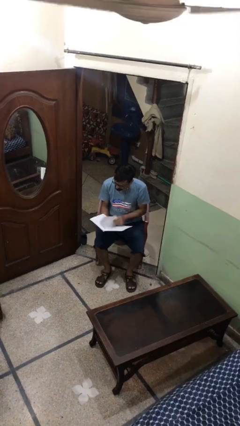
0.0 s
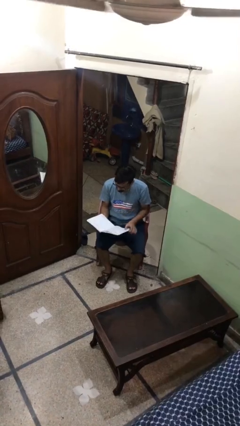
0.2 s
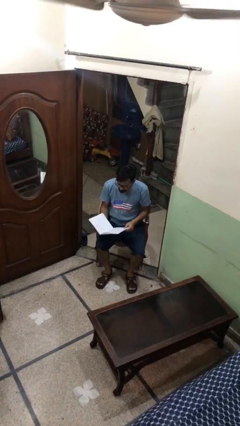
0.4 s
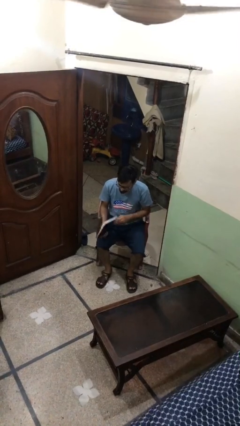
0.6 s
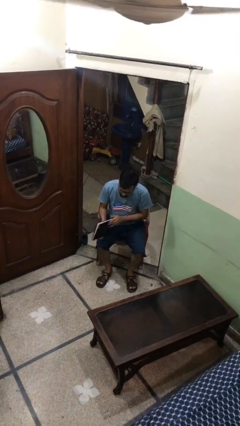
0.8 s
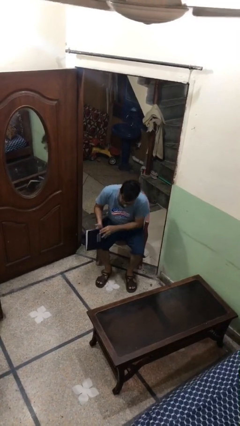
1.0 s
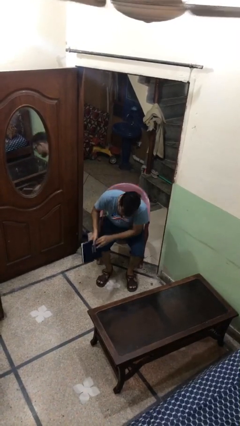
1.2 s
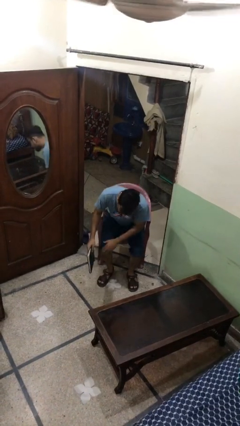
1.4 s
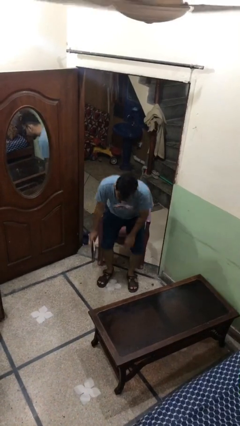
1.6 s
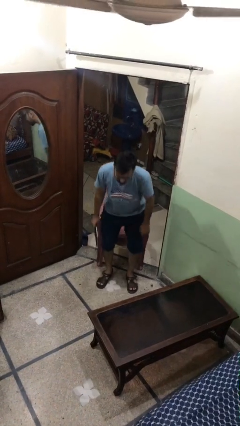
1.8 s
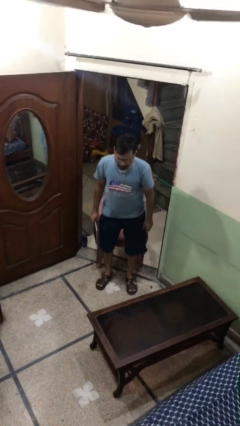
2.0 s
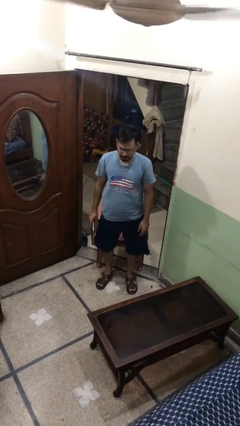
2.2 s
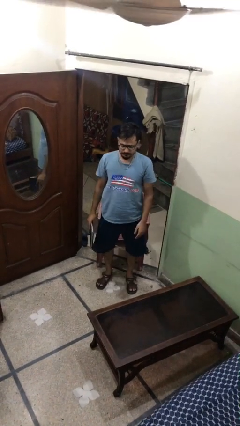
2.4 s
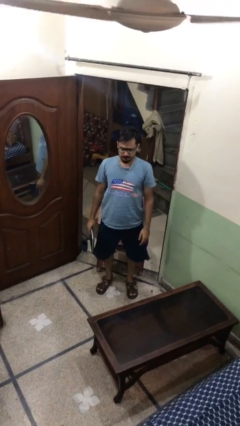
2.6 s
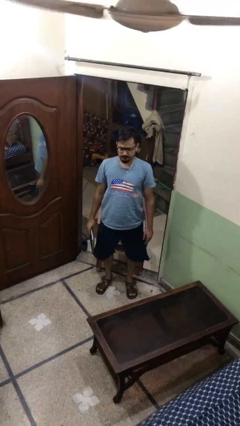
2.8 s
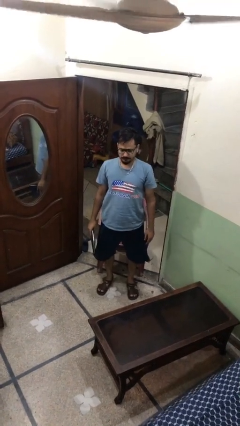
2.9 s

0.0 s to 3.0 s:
person stands up

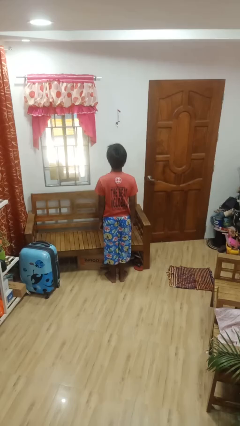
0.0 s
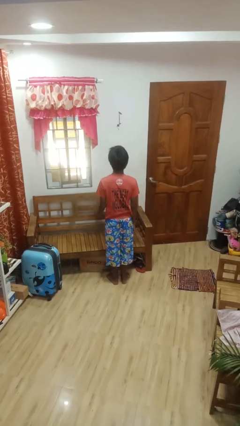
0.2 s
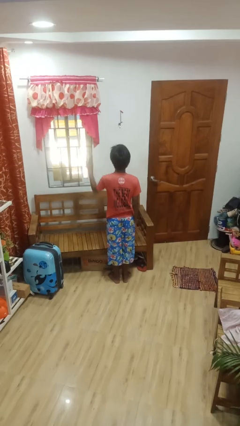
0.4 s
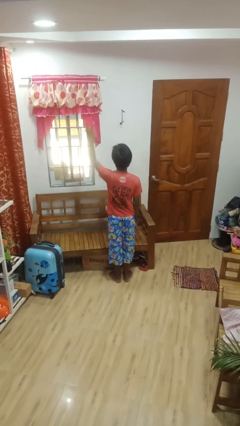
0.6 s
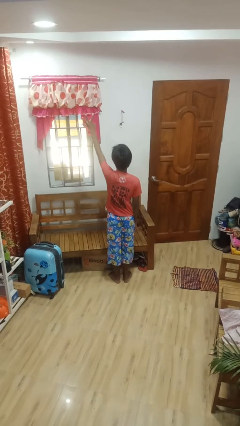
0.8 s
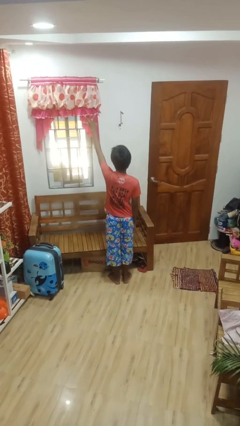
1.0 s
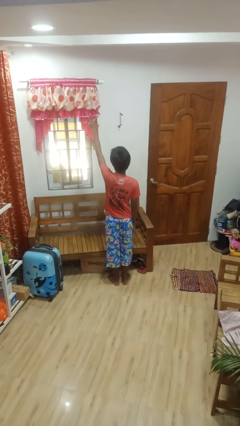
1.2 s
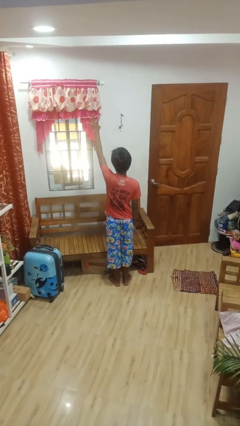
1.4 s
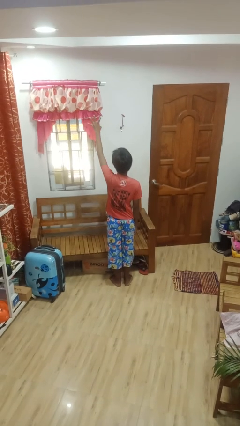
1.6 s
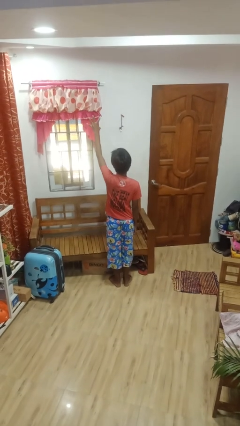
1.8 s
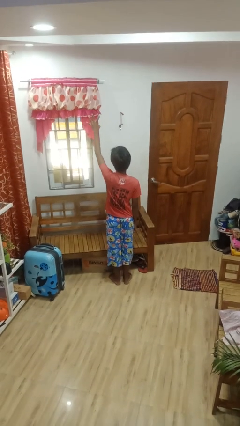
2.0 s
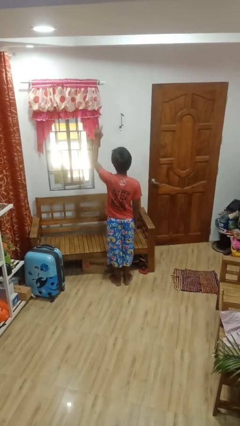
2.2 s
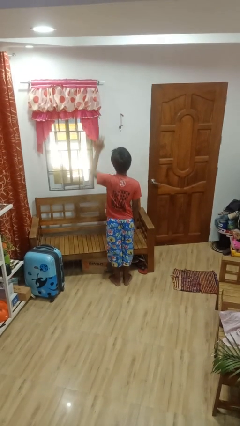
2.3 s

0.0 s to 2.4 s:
person gestures number four

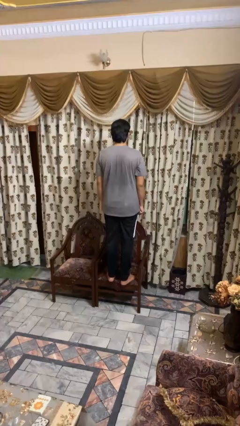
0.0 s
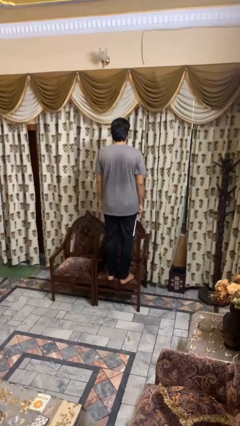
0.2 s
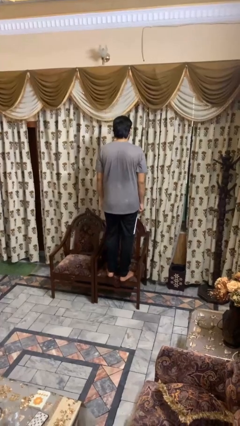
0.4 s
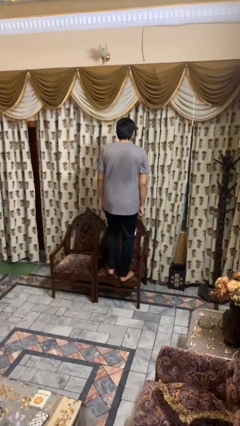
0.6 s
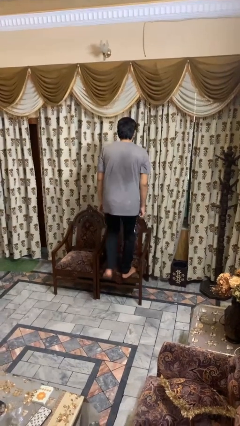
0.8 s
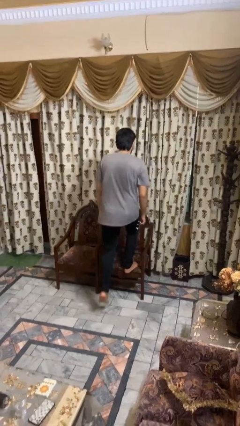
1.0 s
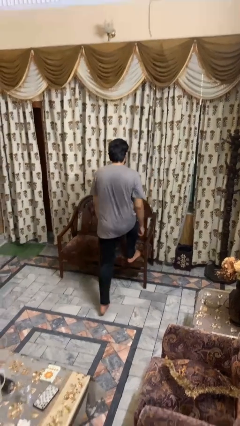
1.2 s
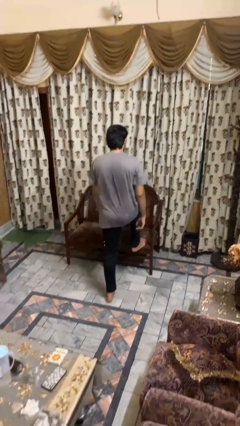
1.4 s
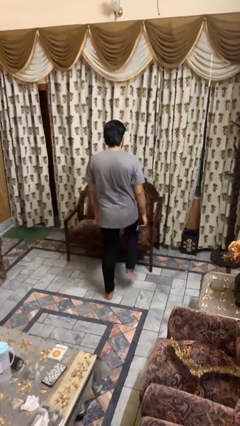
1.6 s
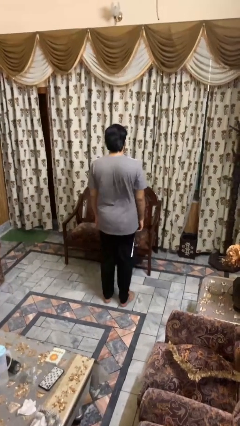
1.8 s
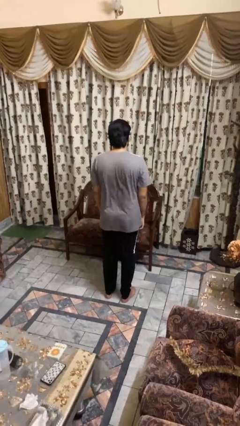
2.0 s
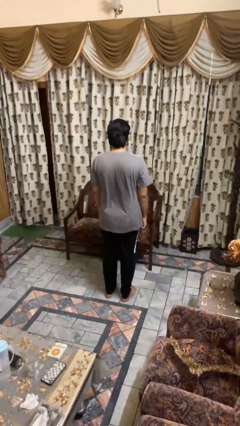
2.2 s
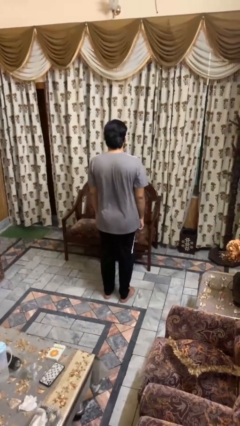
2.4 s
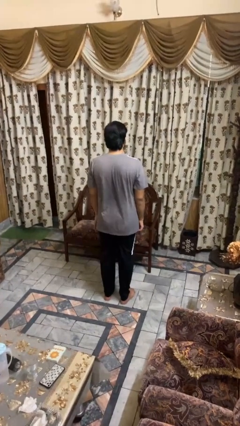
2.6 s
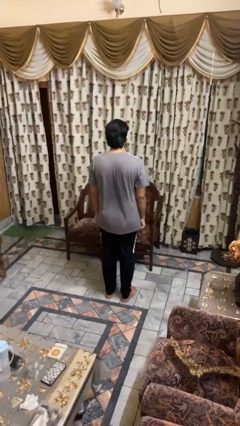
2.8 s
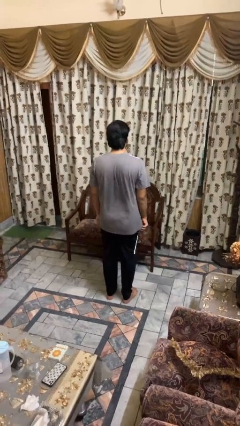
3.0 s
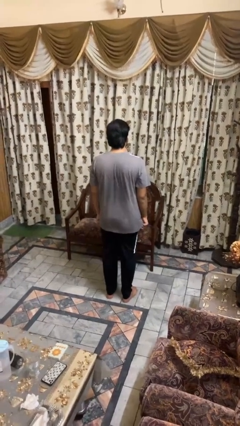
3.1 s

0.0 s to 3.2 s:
person climbs off chair

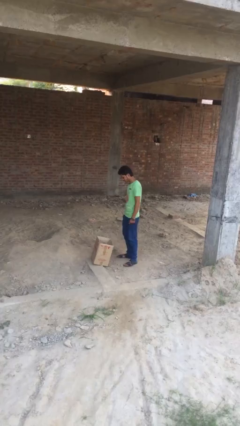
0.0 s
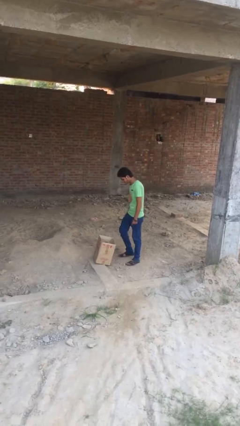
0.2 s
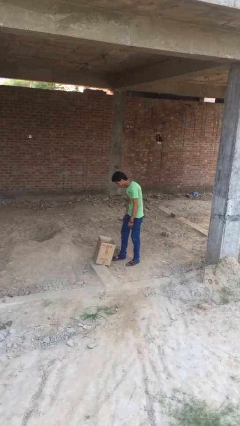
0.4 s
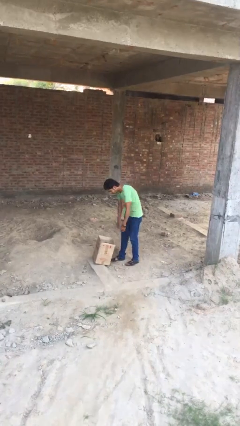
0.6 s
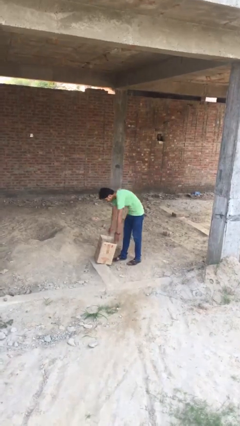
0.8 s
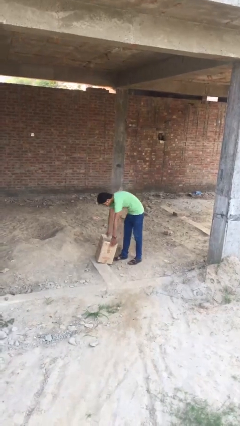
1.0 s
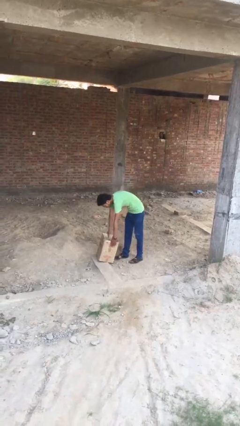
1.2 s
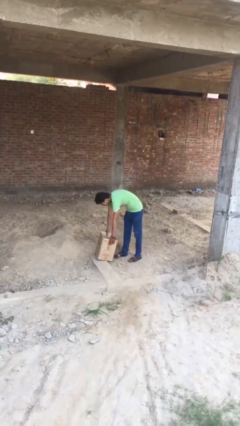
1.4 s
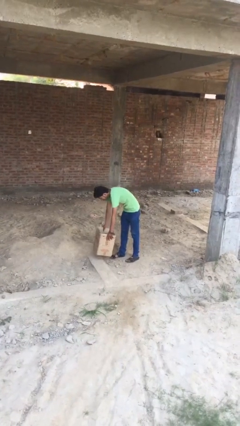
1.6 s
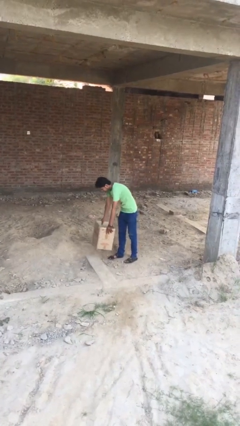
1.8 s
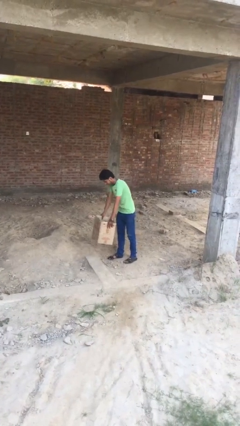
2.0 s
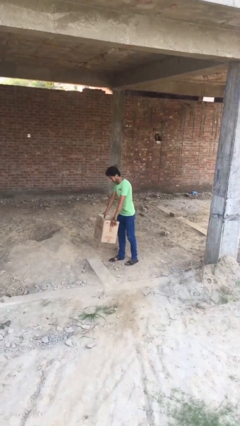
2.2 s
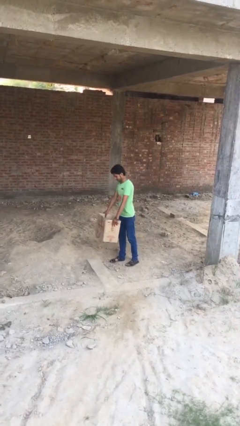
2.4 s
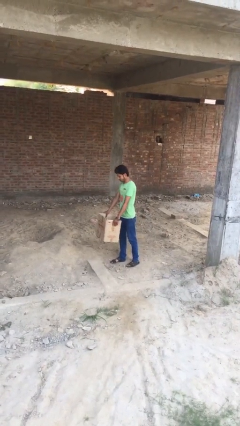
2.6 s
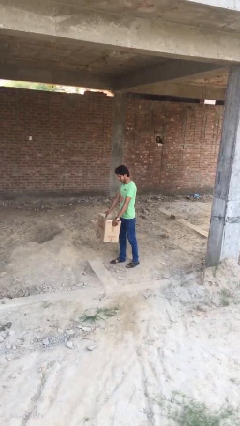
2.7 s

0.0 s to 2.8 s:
person picks up object from floor

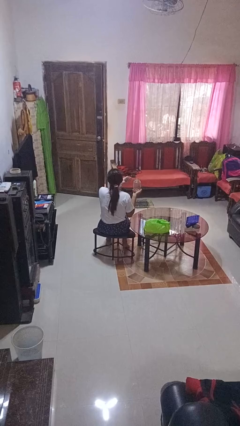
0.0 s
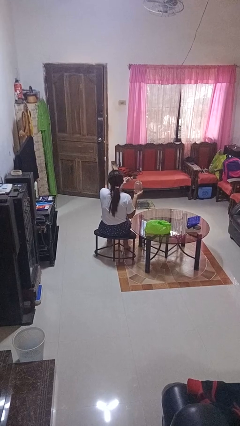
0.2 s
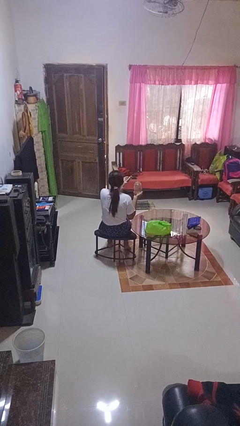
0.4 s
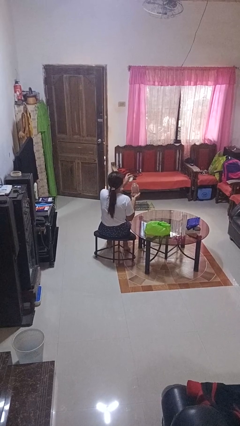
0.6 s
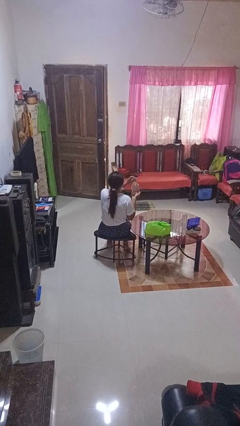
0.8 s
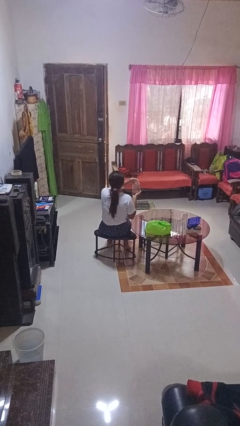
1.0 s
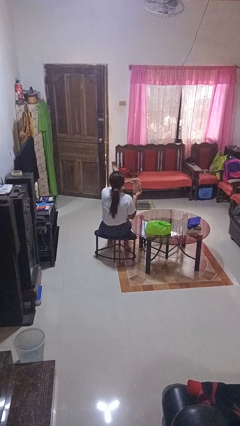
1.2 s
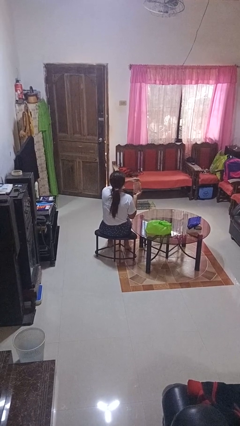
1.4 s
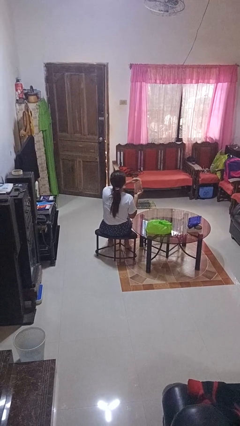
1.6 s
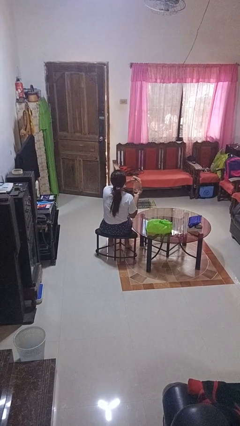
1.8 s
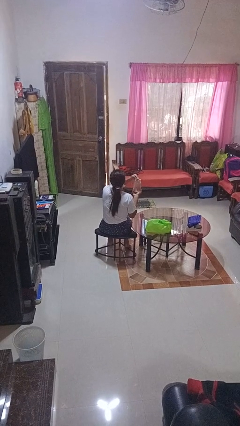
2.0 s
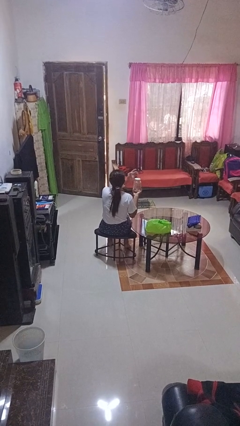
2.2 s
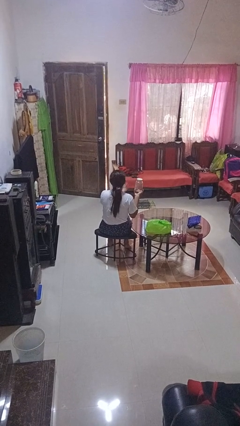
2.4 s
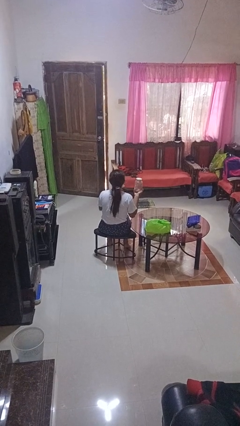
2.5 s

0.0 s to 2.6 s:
person closes jar

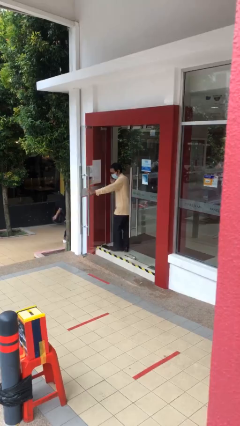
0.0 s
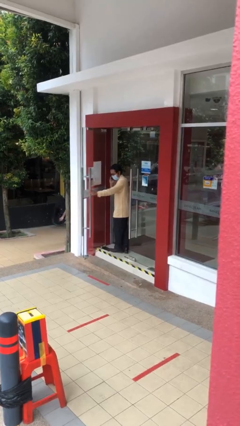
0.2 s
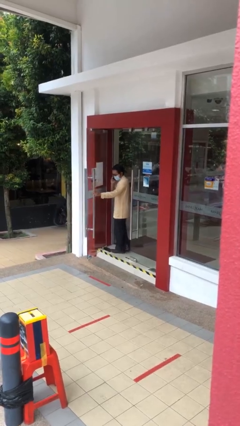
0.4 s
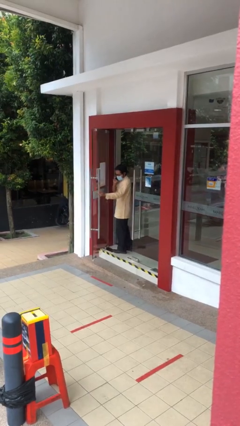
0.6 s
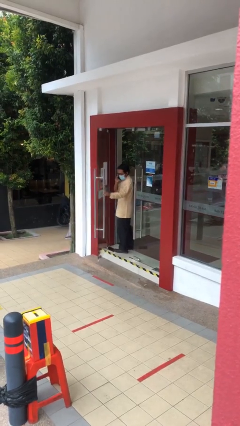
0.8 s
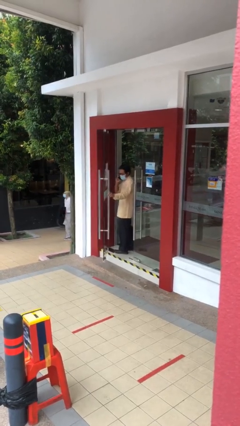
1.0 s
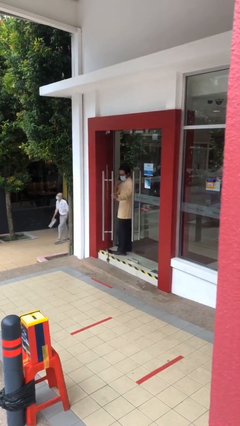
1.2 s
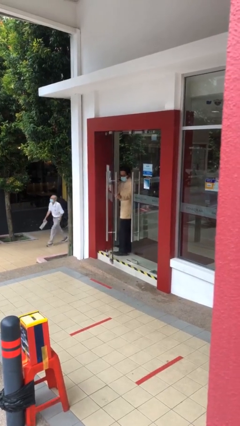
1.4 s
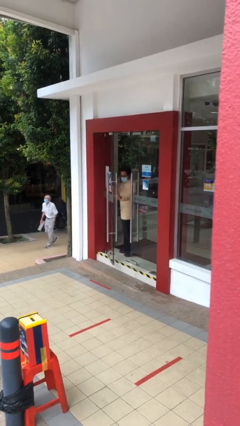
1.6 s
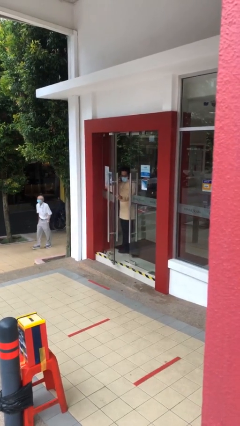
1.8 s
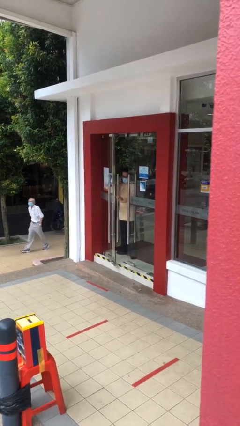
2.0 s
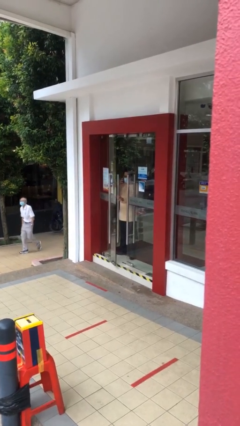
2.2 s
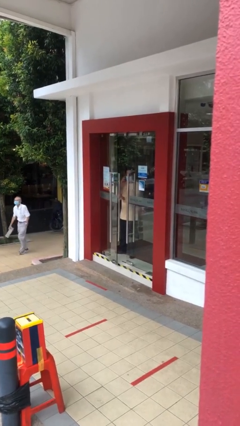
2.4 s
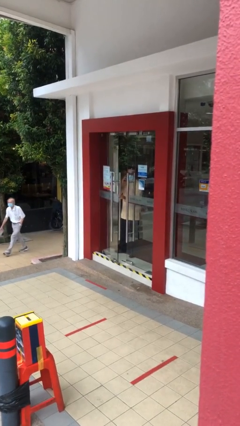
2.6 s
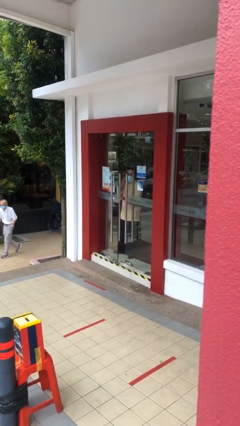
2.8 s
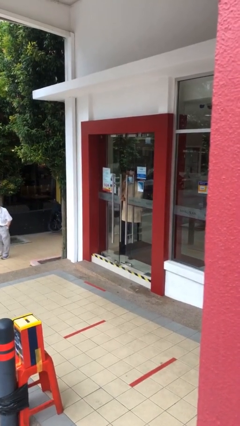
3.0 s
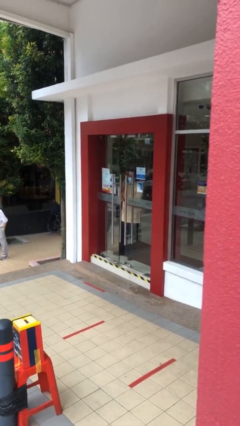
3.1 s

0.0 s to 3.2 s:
person closes facility door
